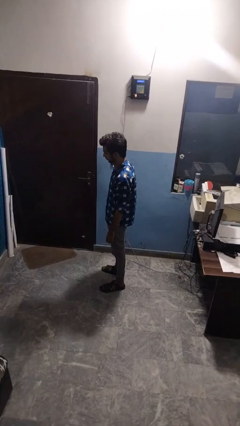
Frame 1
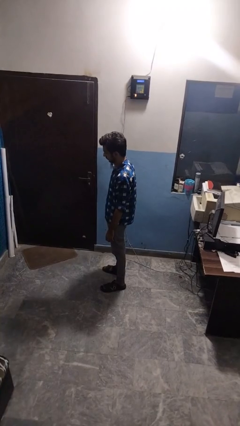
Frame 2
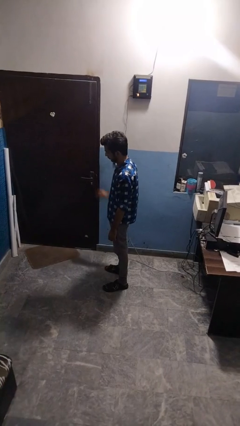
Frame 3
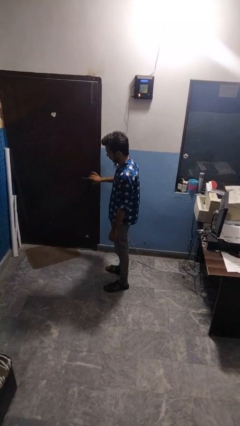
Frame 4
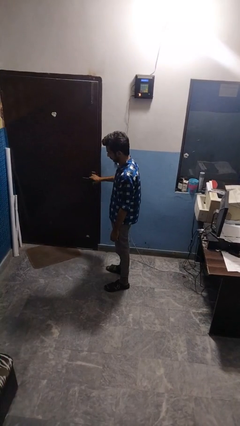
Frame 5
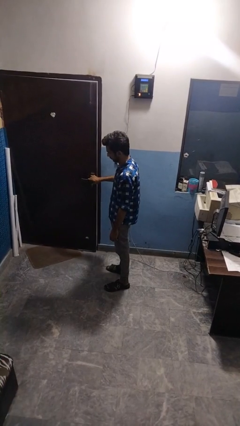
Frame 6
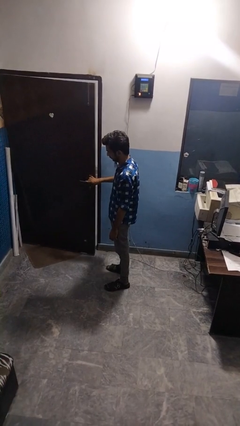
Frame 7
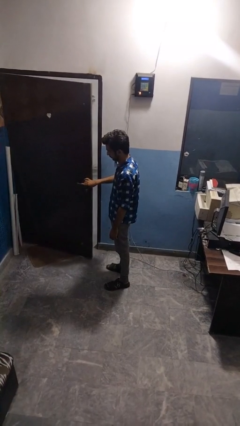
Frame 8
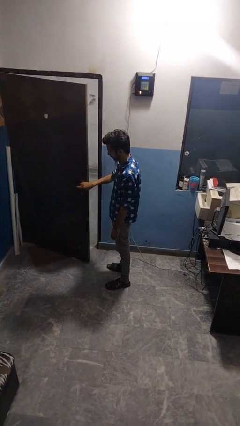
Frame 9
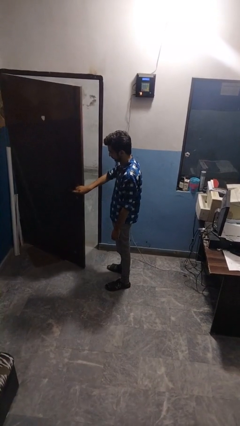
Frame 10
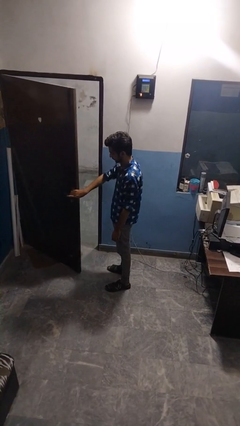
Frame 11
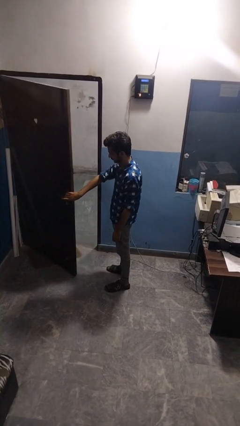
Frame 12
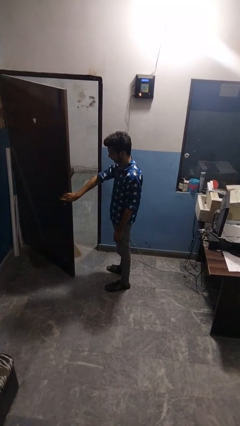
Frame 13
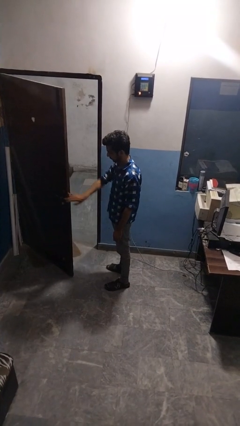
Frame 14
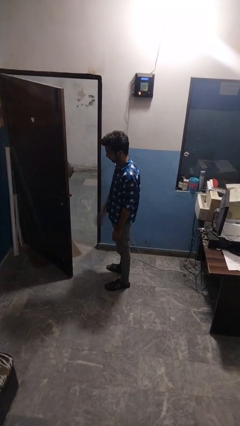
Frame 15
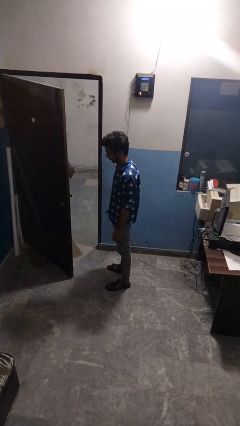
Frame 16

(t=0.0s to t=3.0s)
person opens facility door

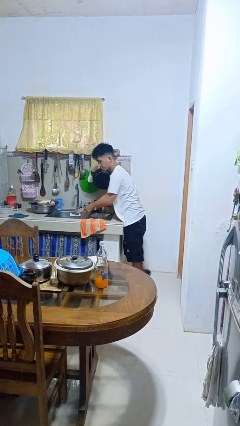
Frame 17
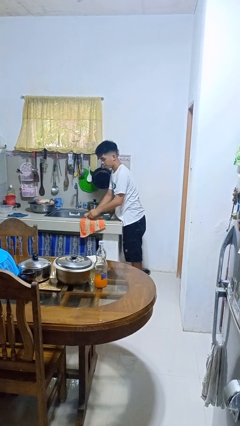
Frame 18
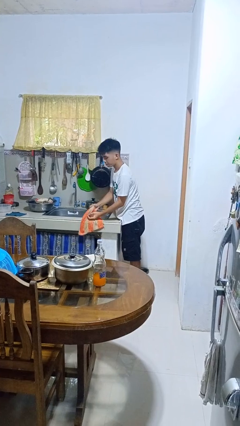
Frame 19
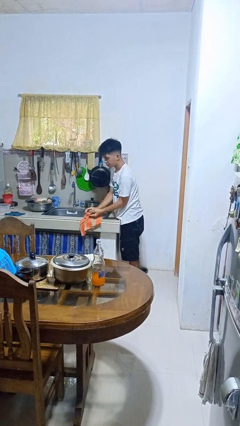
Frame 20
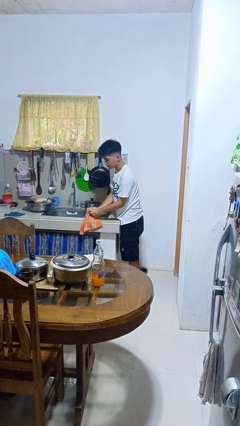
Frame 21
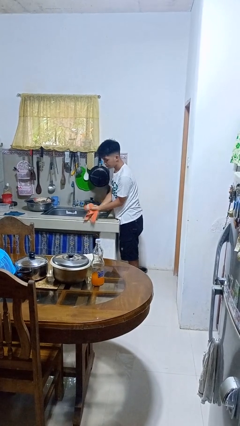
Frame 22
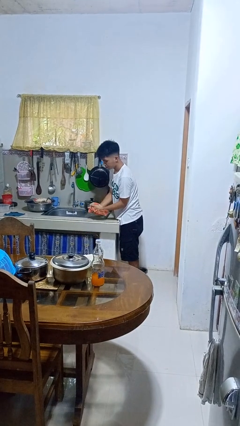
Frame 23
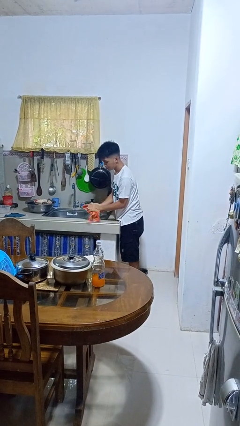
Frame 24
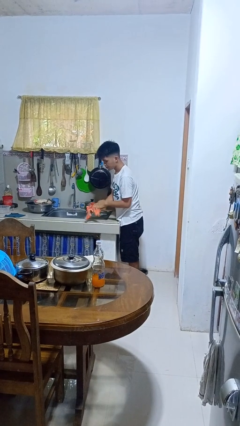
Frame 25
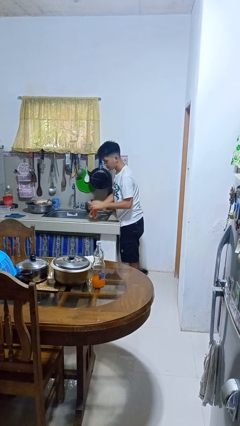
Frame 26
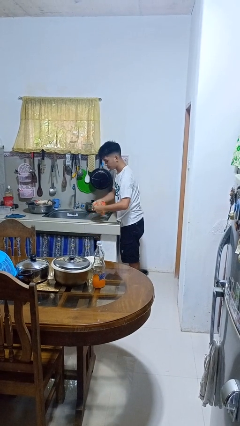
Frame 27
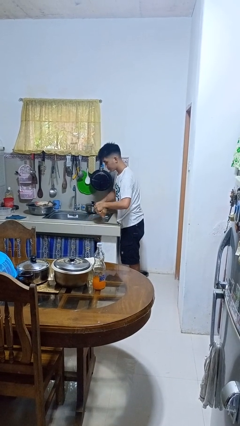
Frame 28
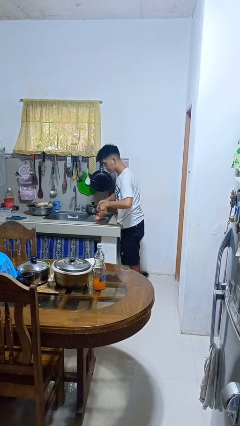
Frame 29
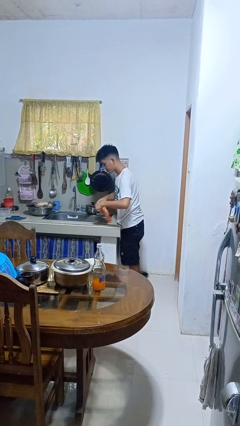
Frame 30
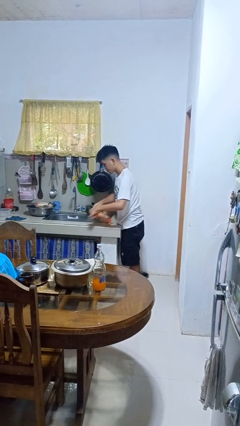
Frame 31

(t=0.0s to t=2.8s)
person dries hands with towel

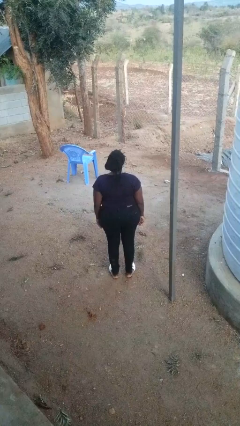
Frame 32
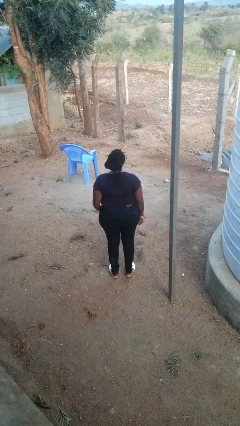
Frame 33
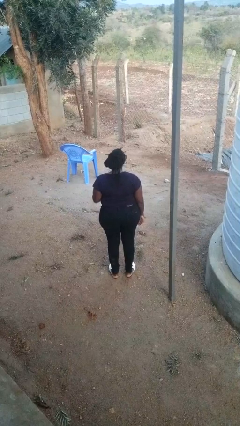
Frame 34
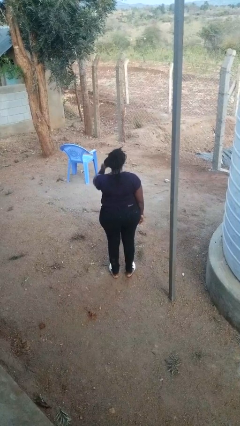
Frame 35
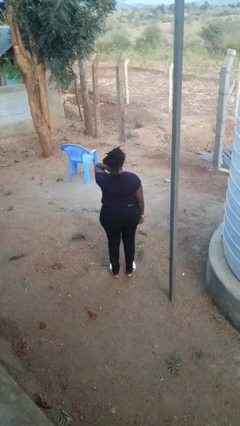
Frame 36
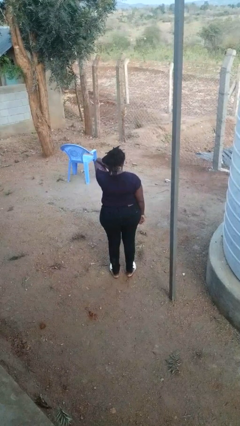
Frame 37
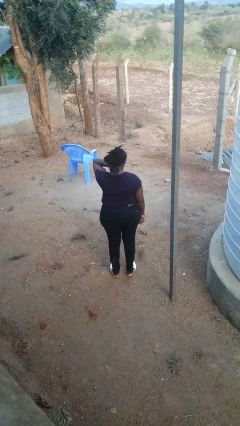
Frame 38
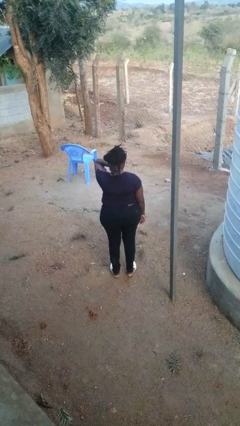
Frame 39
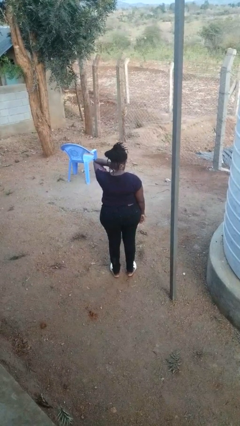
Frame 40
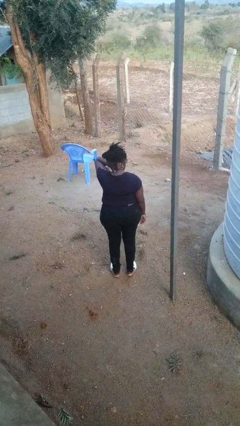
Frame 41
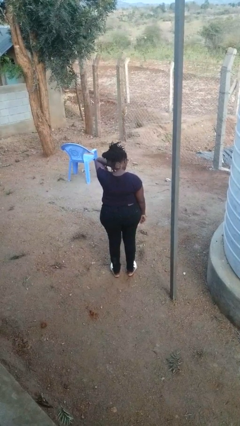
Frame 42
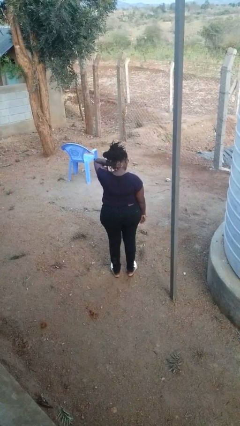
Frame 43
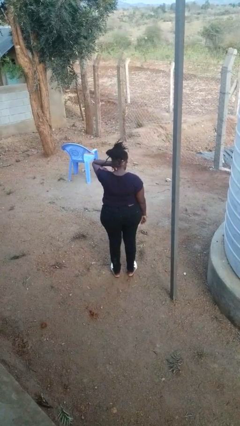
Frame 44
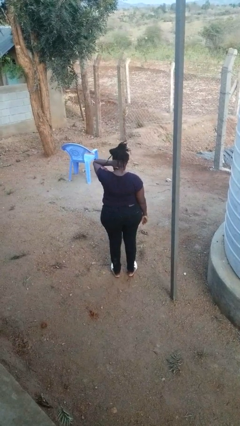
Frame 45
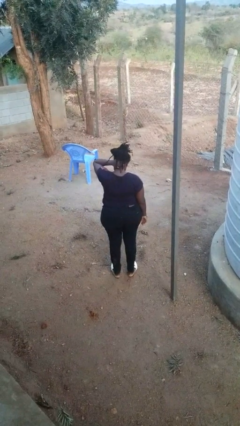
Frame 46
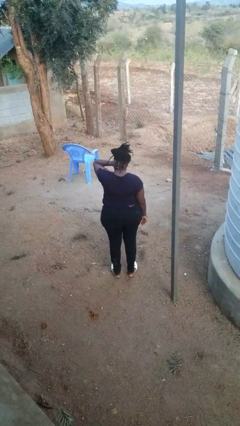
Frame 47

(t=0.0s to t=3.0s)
person rubs neck

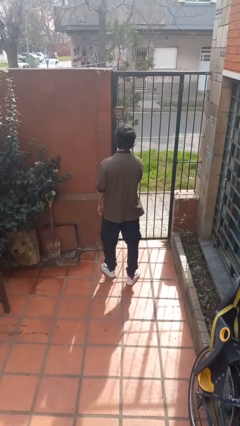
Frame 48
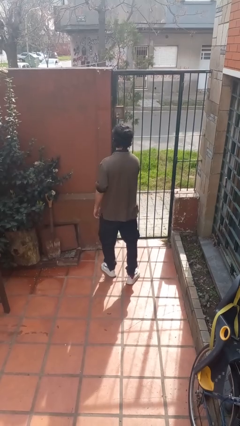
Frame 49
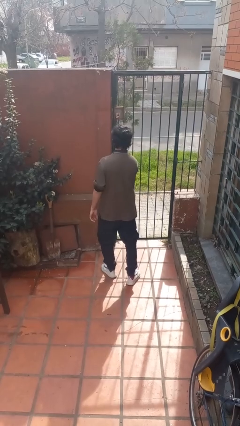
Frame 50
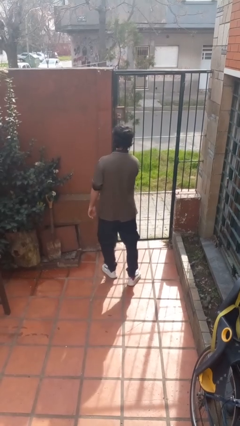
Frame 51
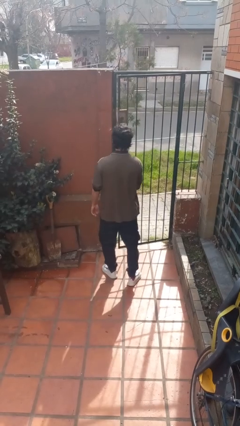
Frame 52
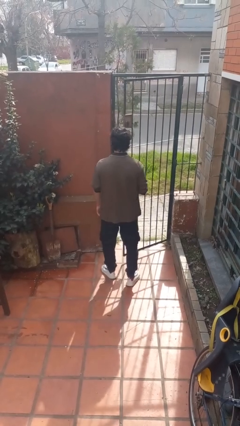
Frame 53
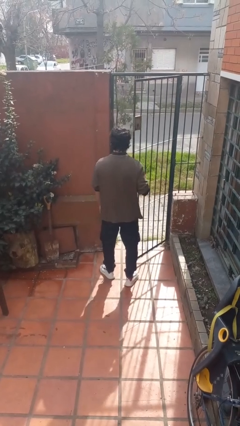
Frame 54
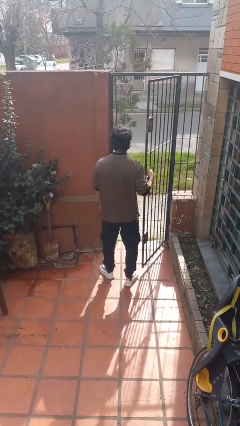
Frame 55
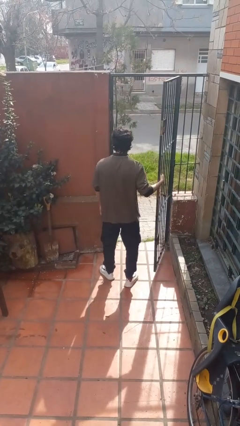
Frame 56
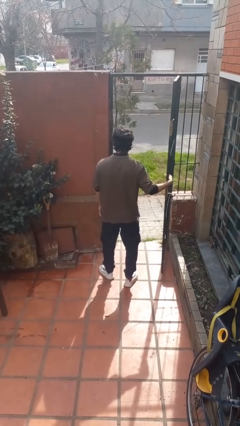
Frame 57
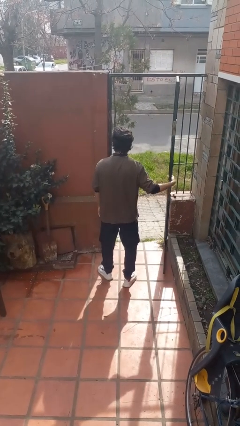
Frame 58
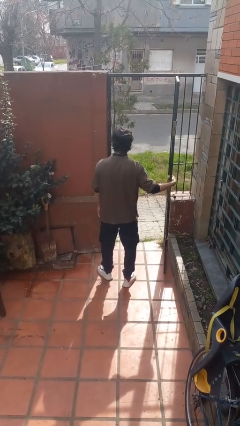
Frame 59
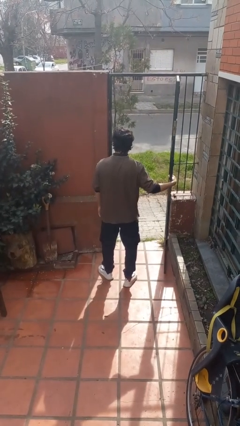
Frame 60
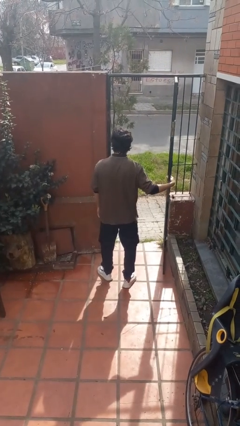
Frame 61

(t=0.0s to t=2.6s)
person opens gate

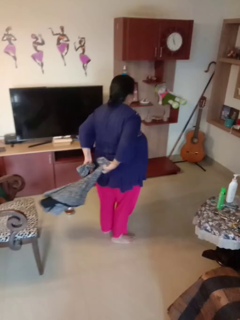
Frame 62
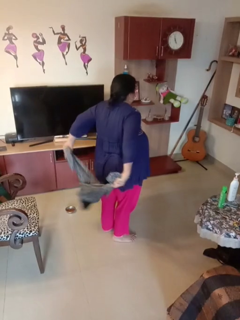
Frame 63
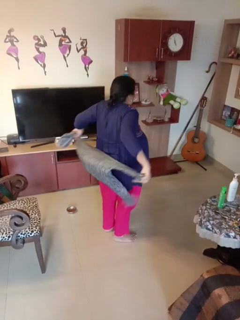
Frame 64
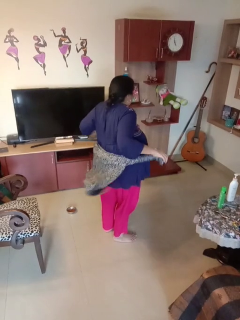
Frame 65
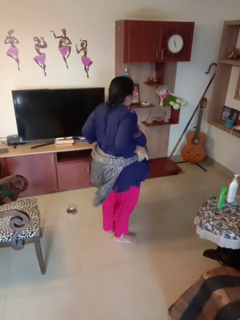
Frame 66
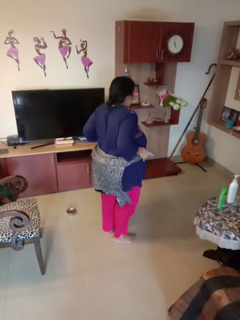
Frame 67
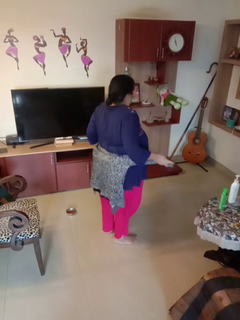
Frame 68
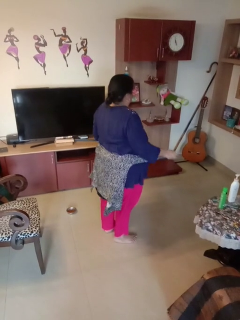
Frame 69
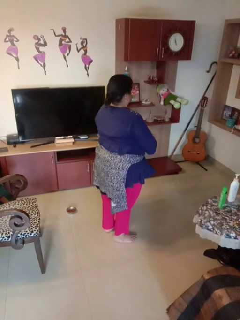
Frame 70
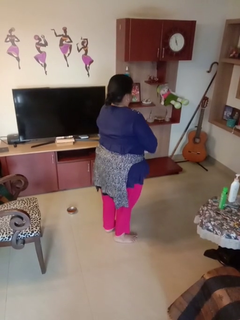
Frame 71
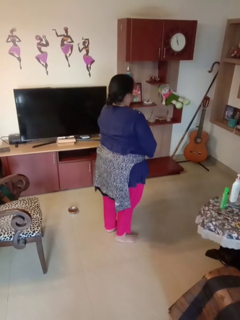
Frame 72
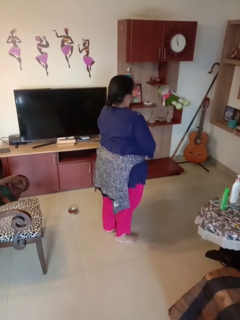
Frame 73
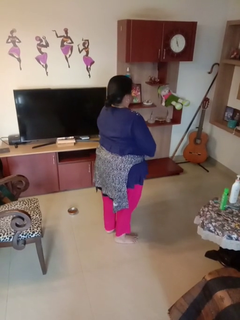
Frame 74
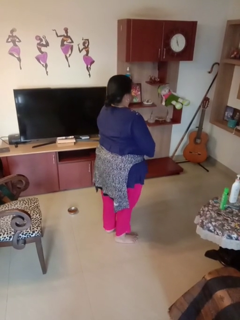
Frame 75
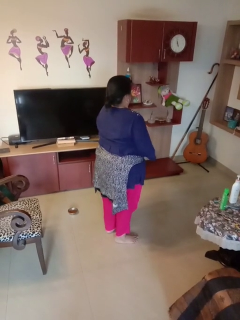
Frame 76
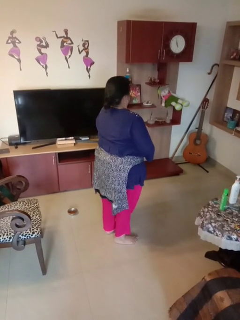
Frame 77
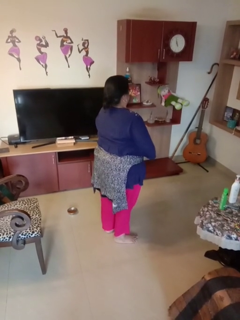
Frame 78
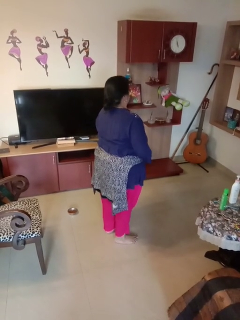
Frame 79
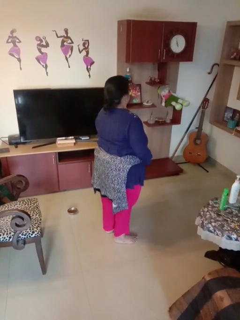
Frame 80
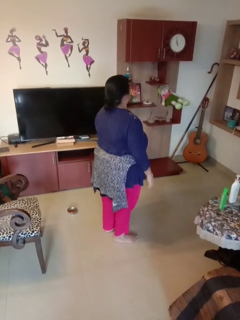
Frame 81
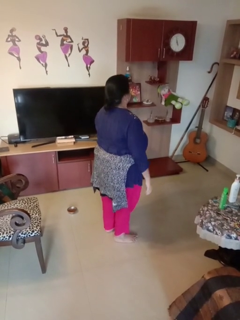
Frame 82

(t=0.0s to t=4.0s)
person ties jacket around waist

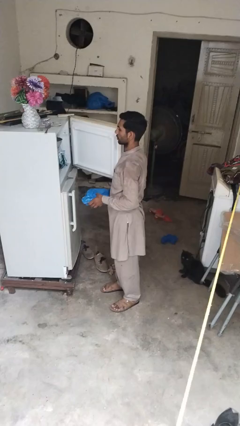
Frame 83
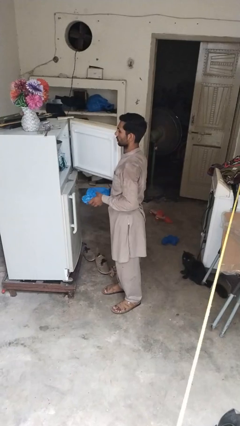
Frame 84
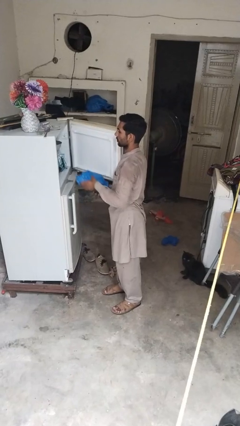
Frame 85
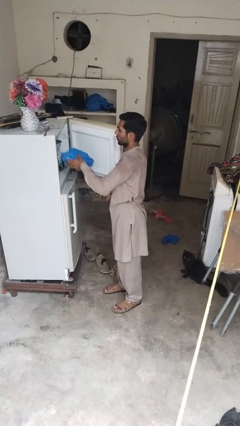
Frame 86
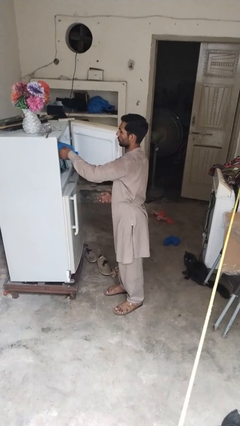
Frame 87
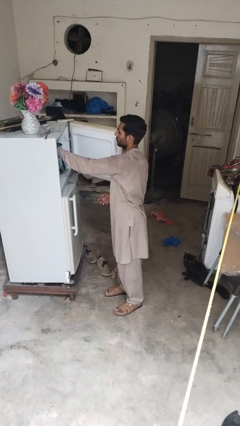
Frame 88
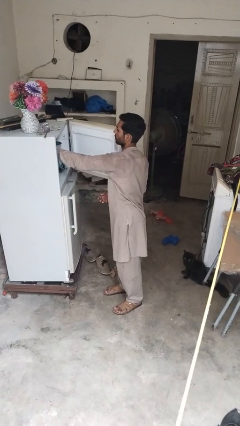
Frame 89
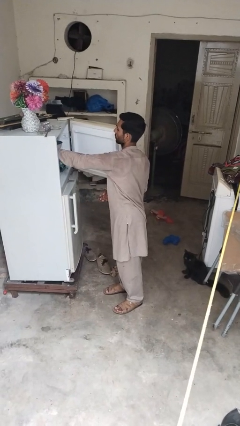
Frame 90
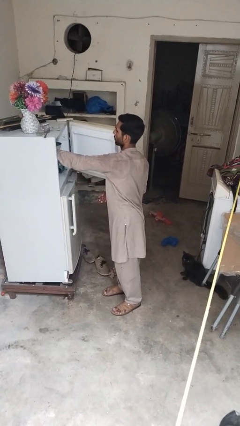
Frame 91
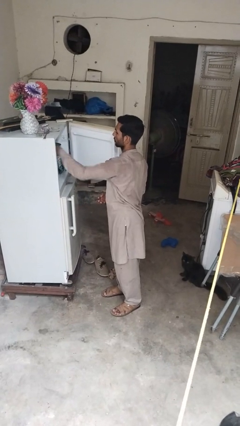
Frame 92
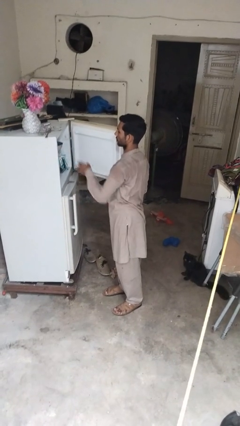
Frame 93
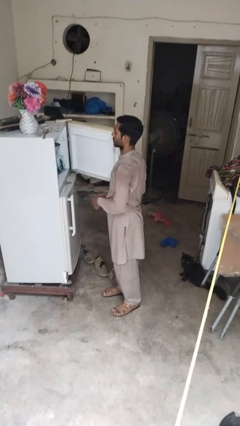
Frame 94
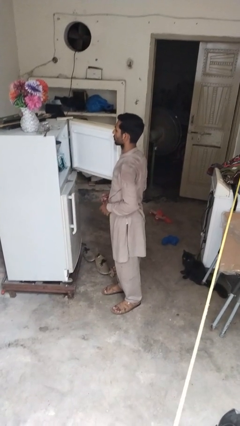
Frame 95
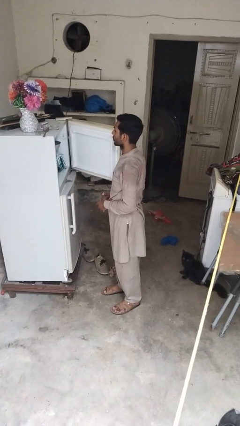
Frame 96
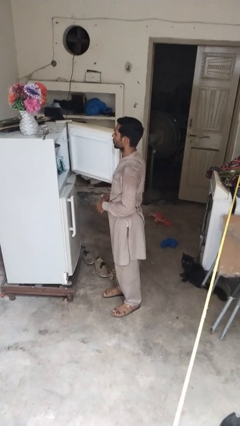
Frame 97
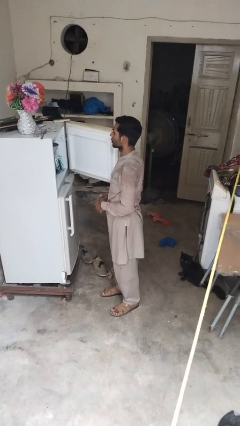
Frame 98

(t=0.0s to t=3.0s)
person loads groceries into refrigerator
